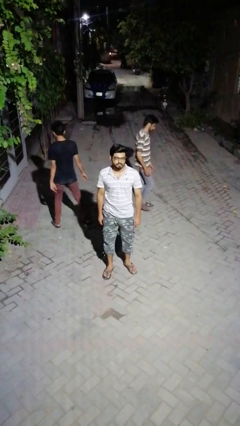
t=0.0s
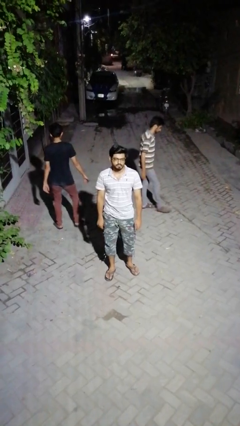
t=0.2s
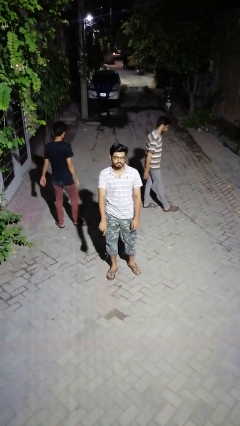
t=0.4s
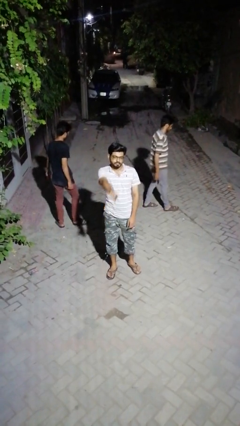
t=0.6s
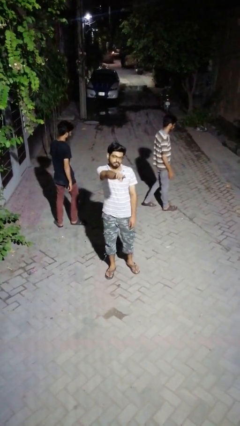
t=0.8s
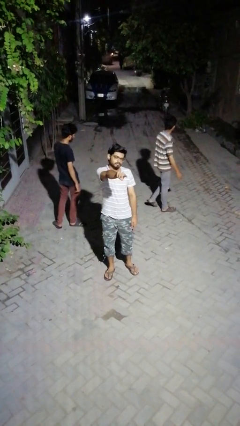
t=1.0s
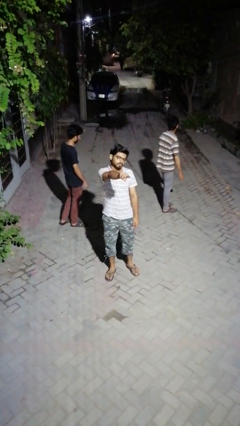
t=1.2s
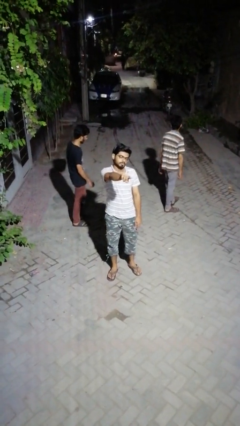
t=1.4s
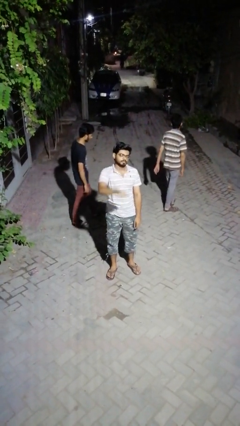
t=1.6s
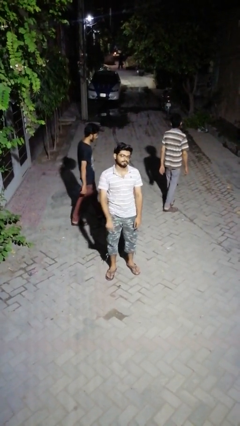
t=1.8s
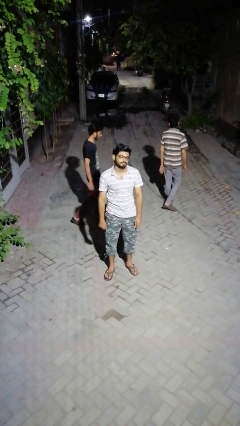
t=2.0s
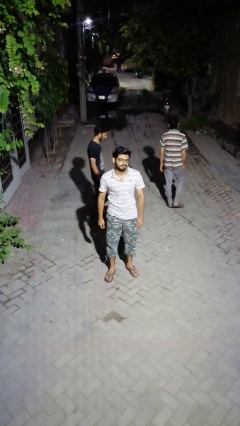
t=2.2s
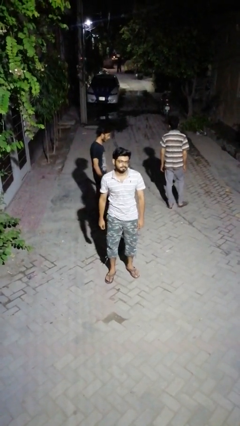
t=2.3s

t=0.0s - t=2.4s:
person points at person

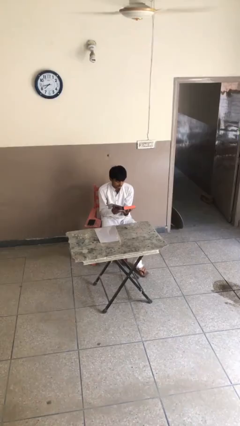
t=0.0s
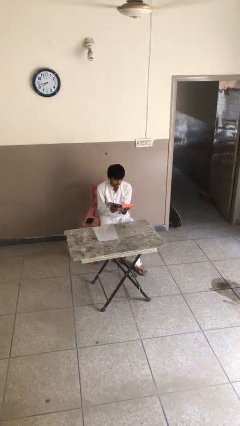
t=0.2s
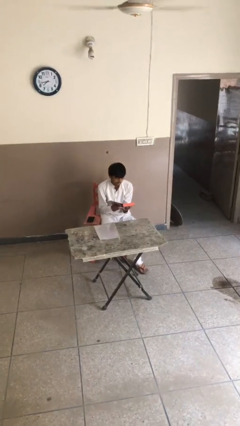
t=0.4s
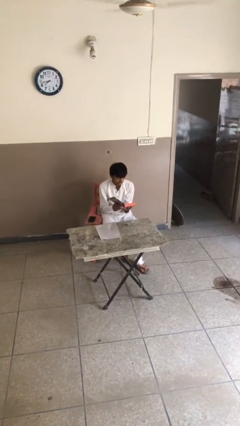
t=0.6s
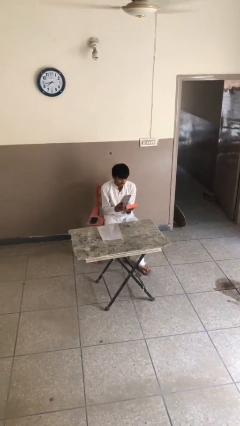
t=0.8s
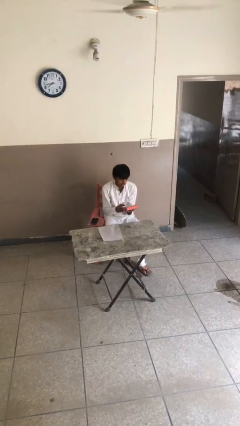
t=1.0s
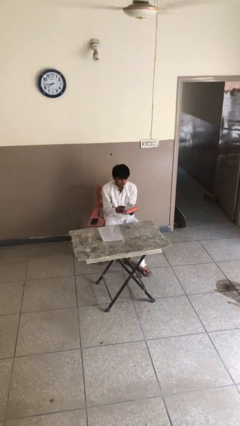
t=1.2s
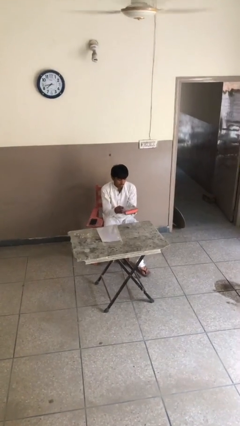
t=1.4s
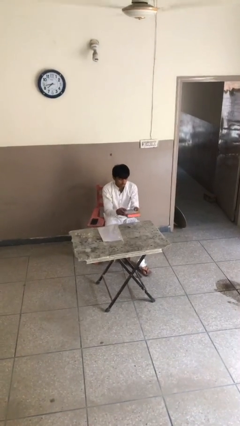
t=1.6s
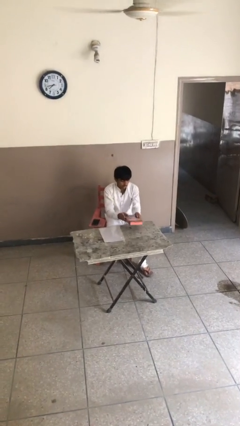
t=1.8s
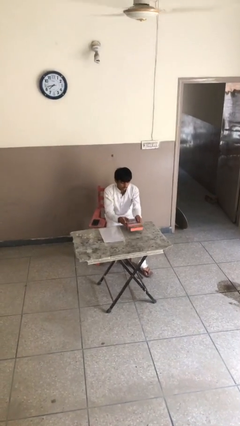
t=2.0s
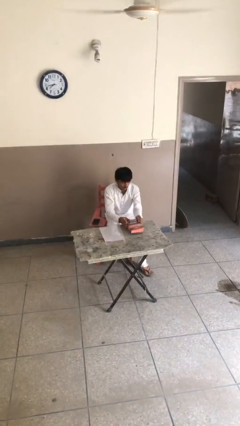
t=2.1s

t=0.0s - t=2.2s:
person puts down object on table

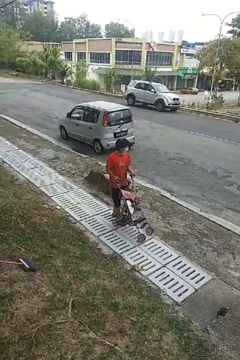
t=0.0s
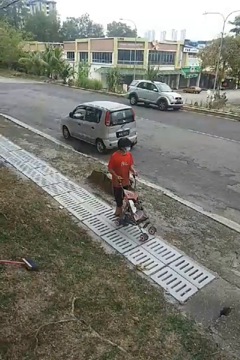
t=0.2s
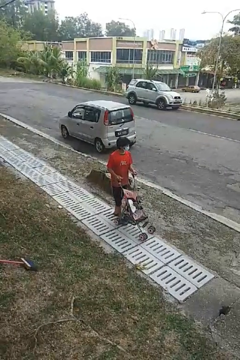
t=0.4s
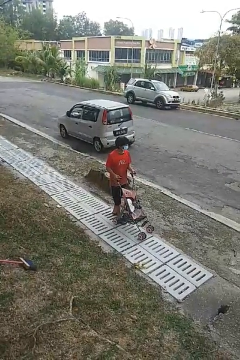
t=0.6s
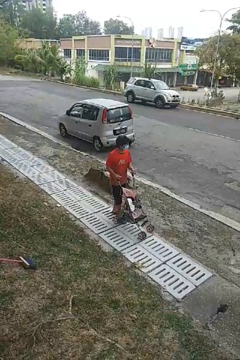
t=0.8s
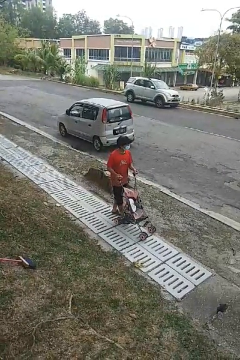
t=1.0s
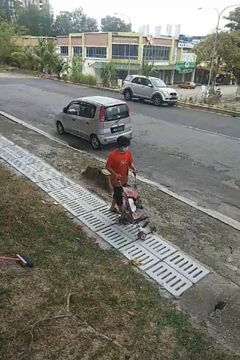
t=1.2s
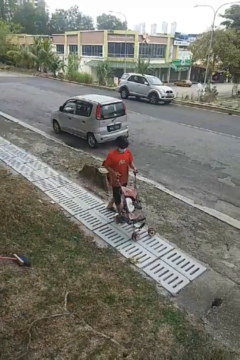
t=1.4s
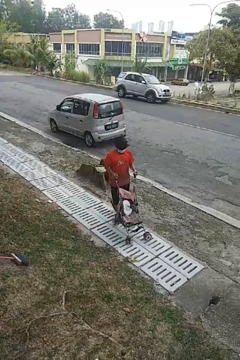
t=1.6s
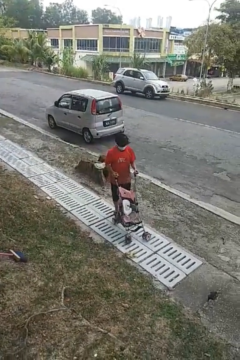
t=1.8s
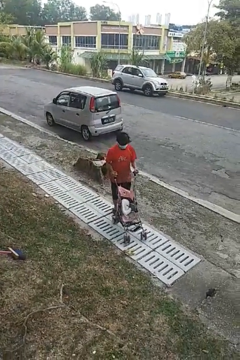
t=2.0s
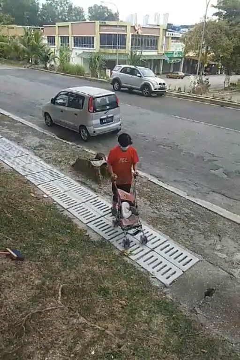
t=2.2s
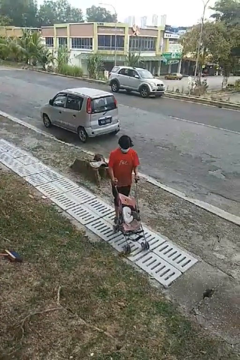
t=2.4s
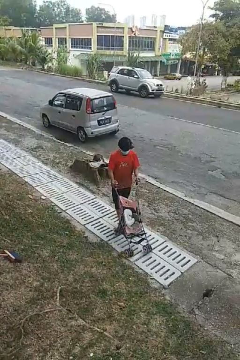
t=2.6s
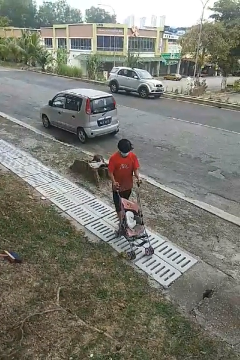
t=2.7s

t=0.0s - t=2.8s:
person pushes wheeled cart

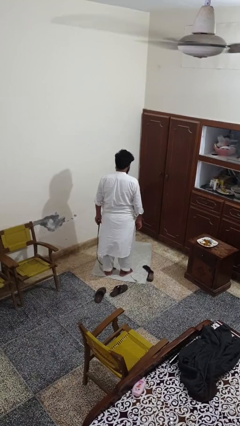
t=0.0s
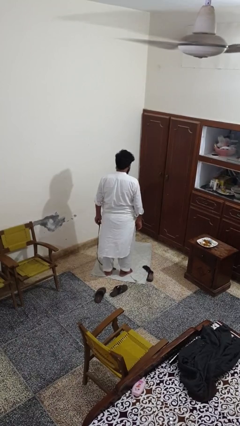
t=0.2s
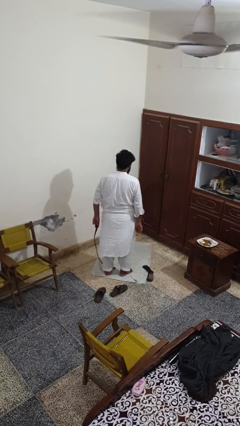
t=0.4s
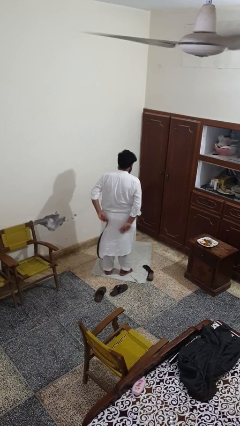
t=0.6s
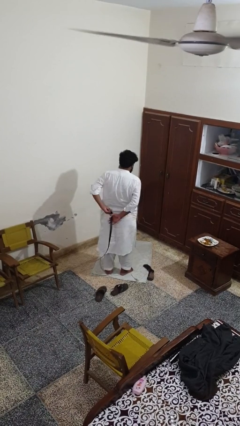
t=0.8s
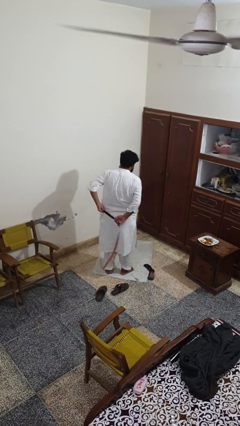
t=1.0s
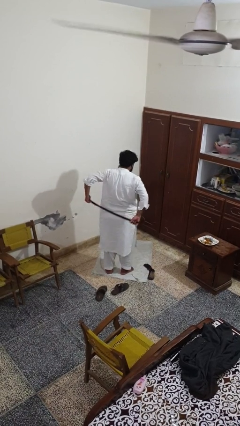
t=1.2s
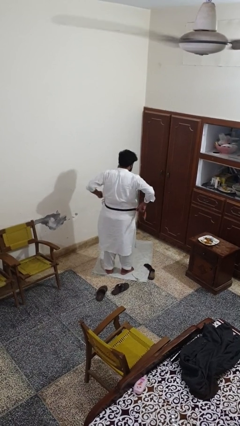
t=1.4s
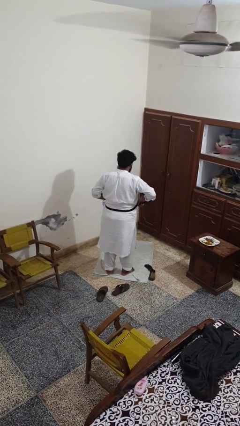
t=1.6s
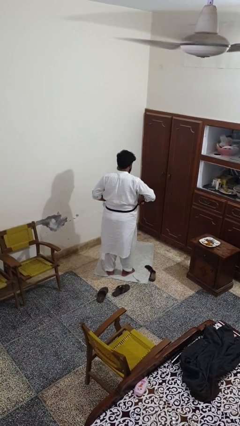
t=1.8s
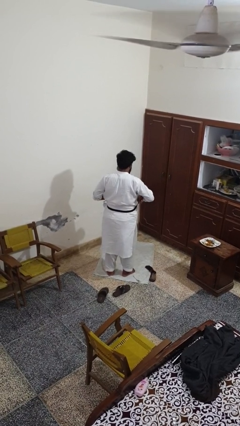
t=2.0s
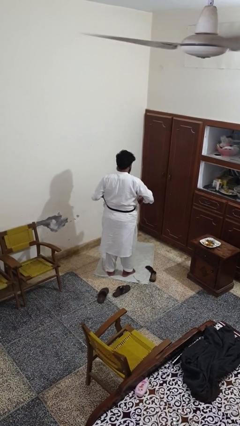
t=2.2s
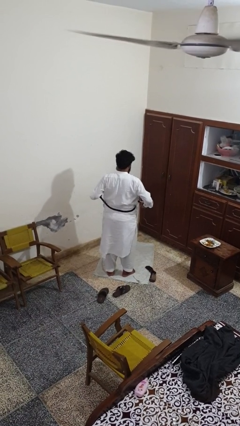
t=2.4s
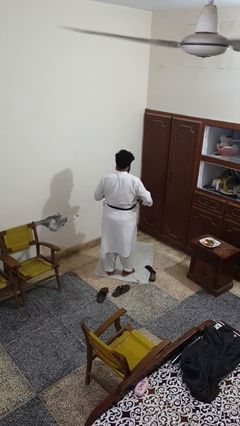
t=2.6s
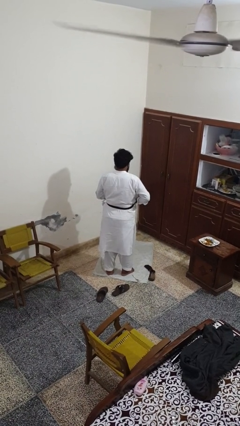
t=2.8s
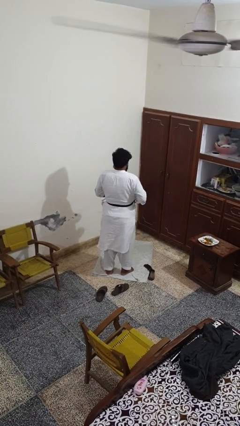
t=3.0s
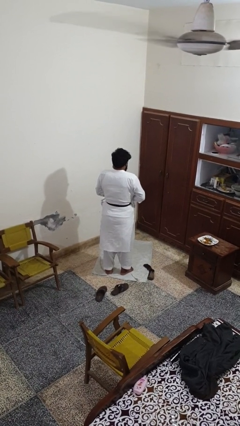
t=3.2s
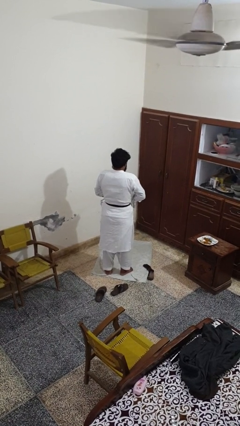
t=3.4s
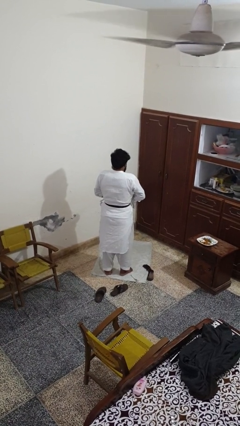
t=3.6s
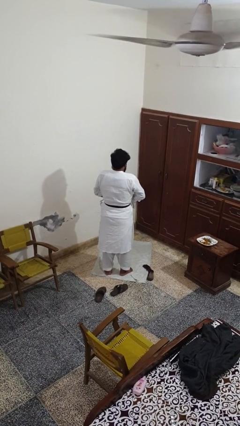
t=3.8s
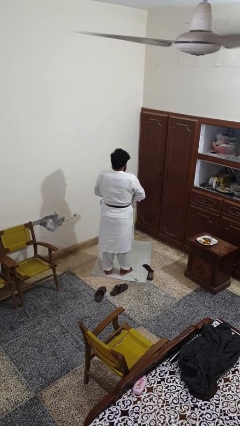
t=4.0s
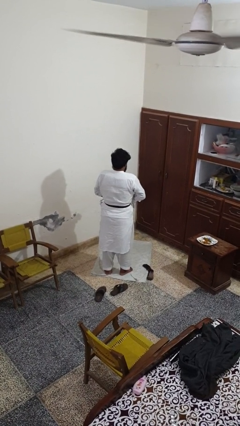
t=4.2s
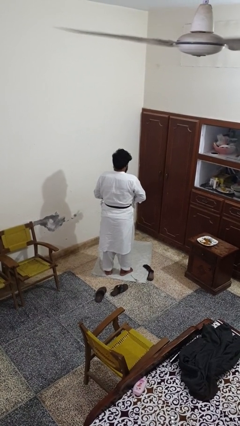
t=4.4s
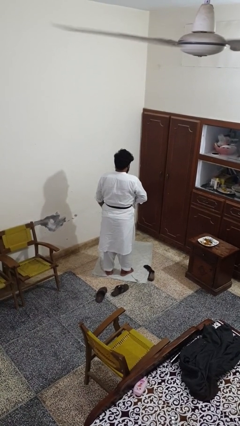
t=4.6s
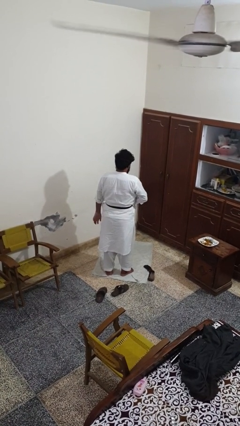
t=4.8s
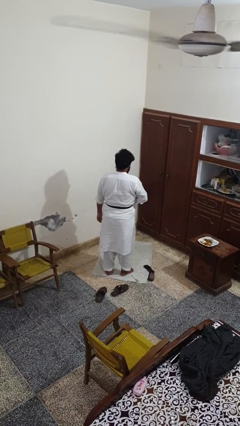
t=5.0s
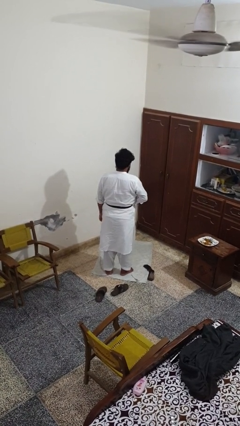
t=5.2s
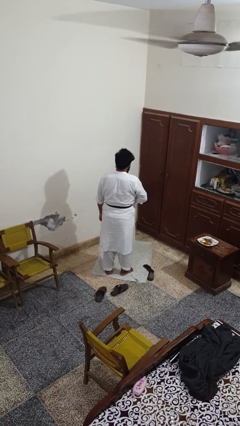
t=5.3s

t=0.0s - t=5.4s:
person puts on belt

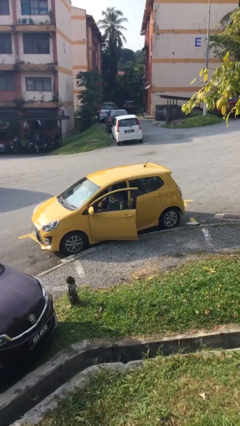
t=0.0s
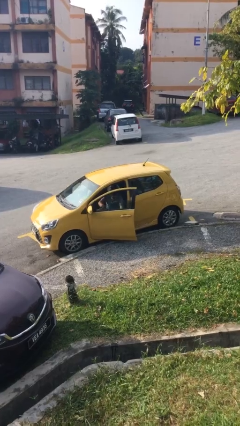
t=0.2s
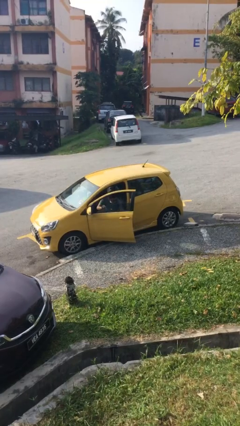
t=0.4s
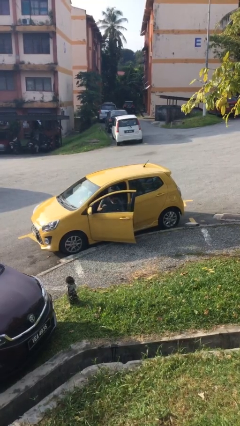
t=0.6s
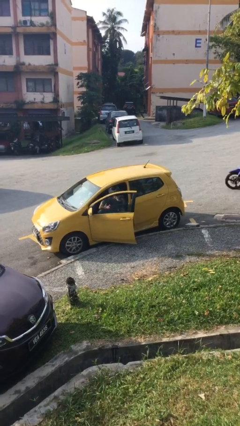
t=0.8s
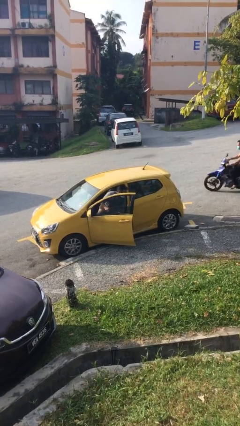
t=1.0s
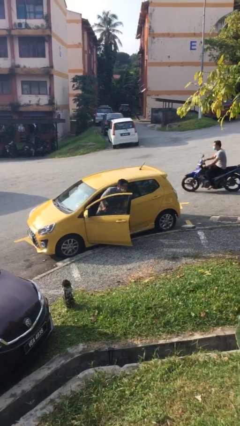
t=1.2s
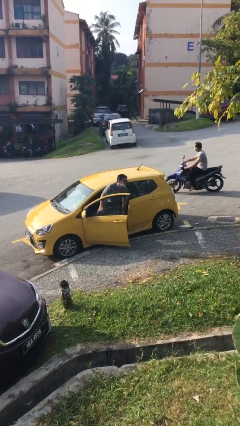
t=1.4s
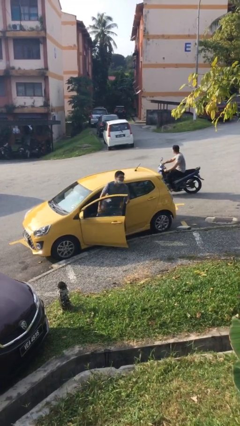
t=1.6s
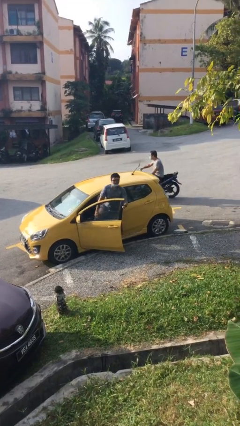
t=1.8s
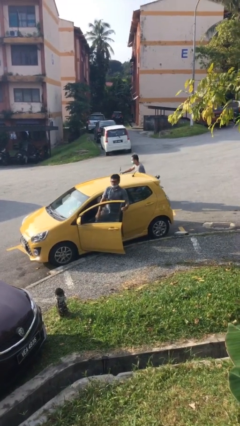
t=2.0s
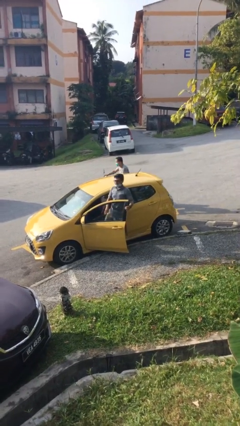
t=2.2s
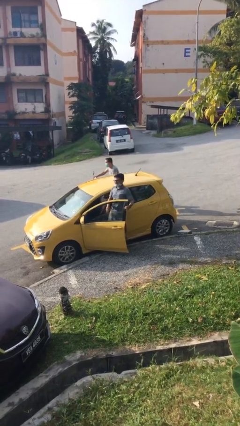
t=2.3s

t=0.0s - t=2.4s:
person exits car

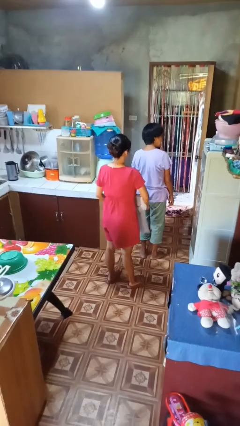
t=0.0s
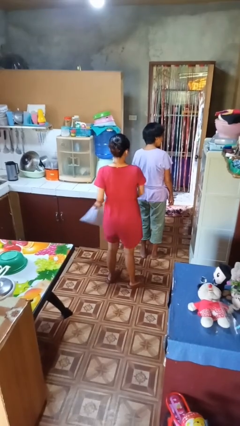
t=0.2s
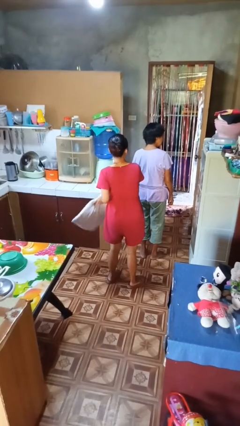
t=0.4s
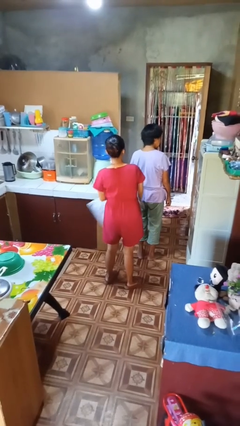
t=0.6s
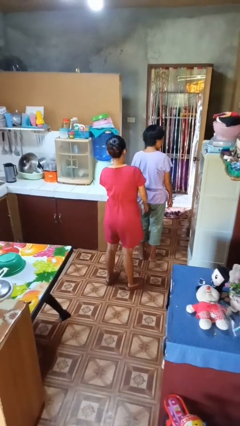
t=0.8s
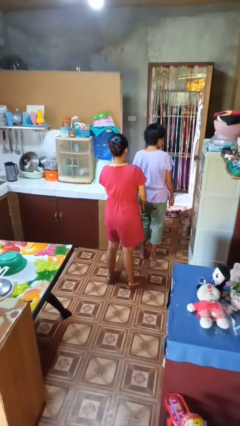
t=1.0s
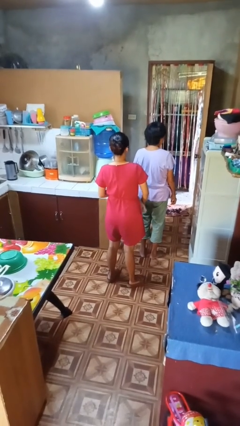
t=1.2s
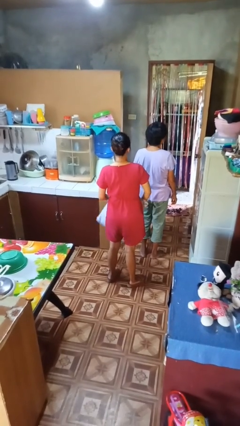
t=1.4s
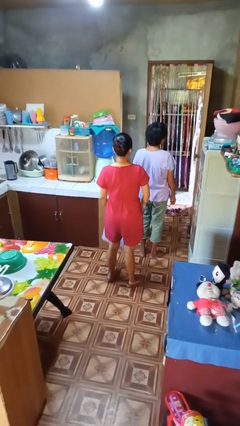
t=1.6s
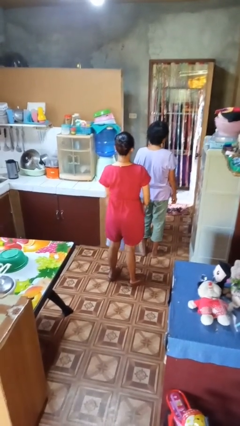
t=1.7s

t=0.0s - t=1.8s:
person hits person with pillow

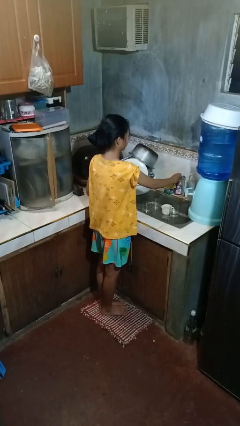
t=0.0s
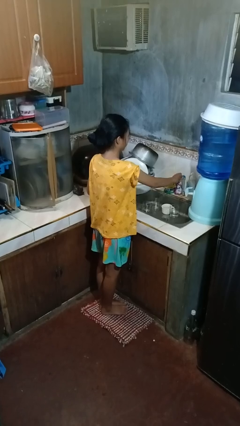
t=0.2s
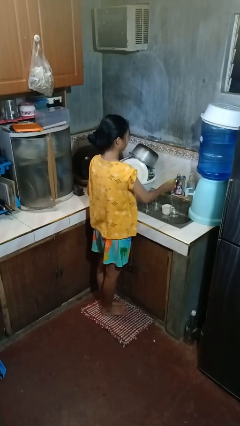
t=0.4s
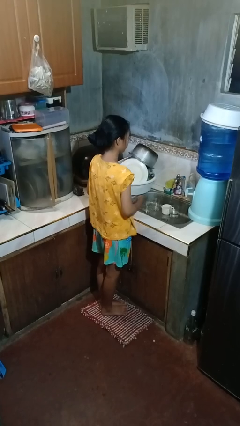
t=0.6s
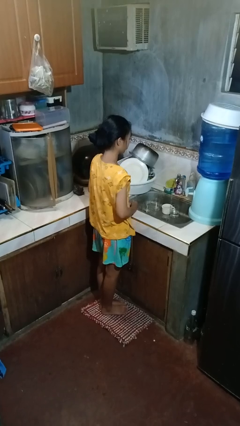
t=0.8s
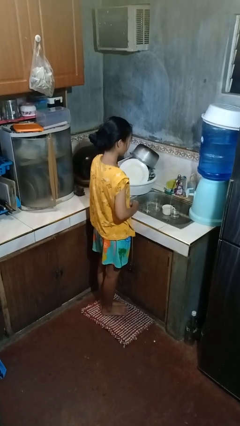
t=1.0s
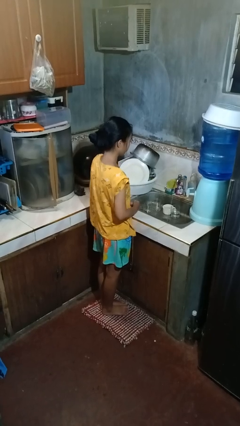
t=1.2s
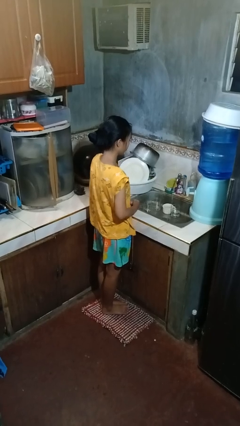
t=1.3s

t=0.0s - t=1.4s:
person turns on faucet
